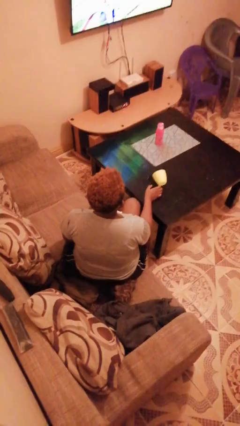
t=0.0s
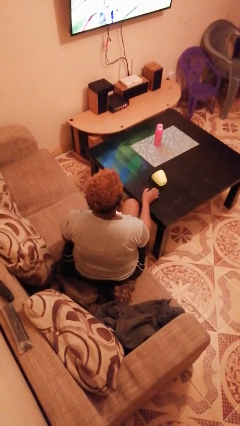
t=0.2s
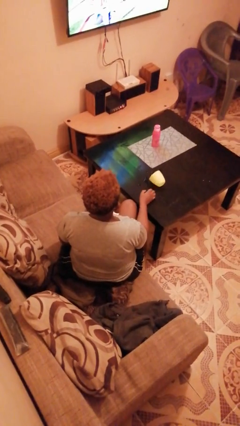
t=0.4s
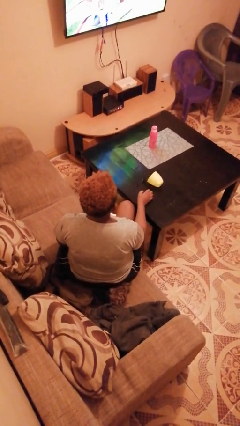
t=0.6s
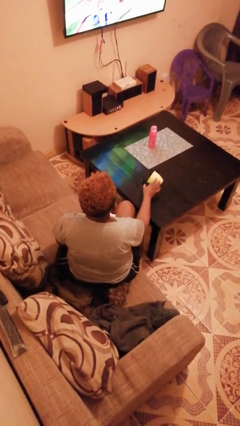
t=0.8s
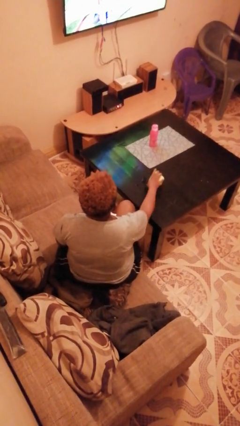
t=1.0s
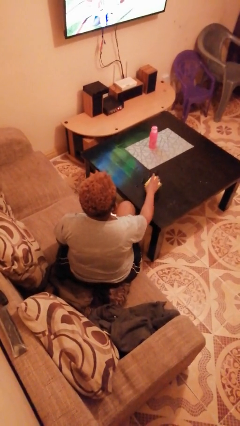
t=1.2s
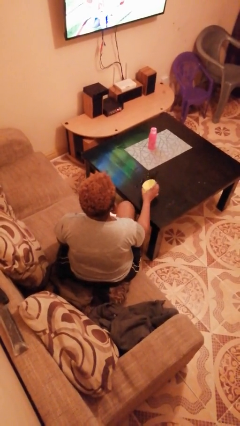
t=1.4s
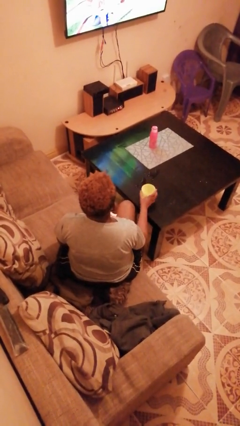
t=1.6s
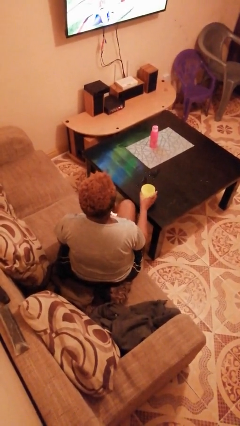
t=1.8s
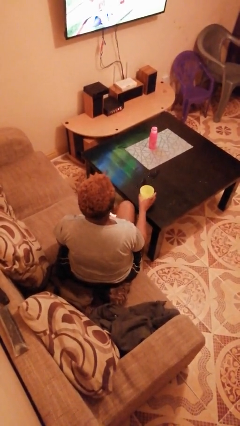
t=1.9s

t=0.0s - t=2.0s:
person sets upright glass

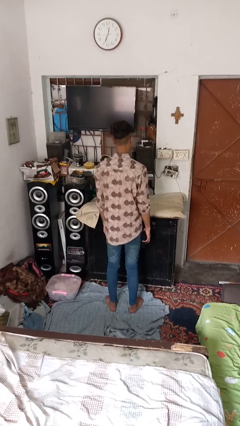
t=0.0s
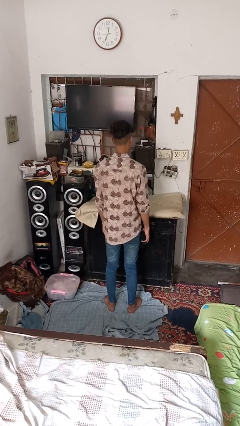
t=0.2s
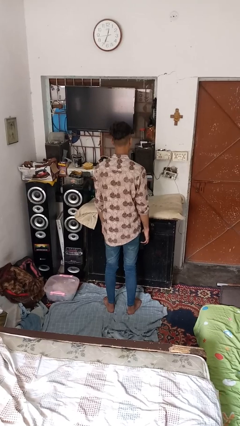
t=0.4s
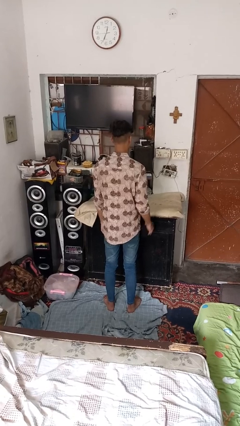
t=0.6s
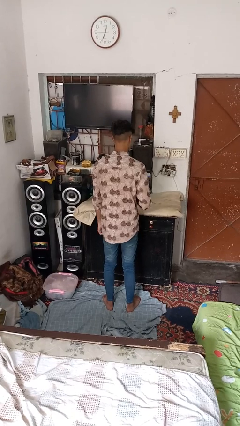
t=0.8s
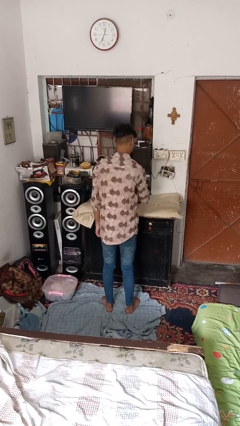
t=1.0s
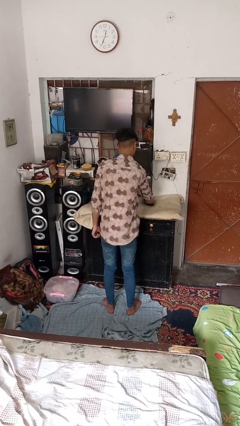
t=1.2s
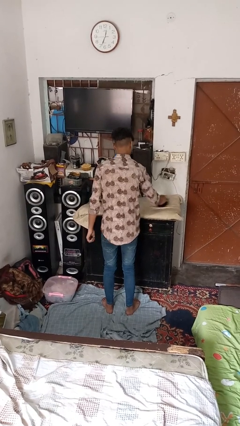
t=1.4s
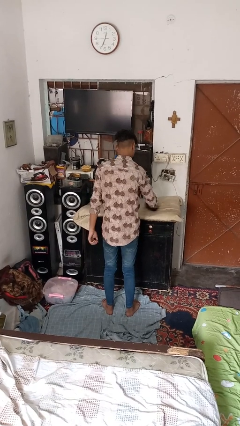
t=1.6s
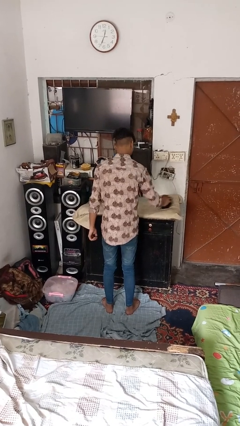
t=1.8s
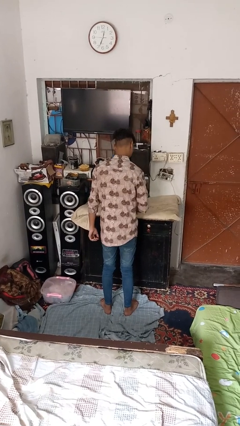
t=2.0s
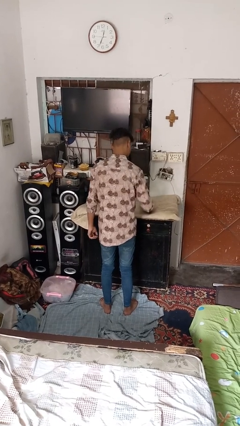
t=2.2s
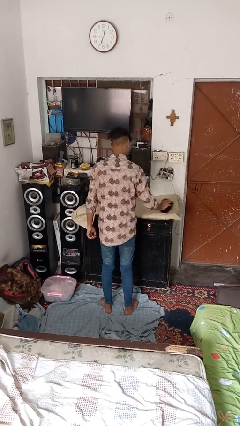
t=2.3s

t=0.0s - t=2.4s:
person cleans table with rag

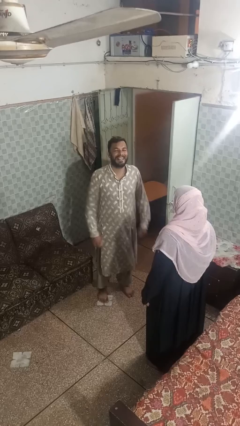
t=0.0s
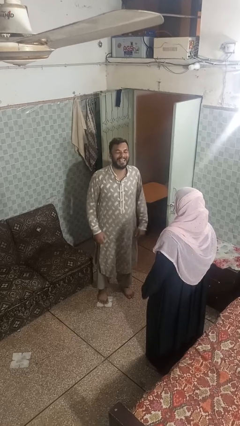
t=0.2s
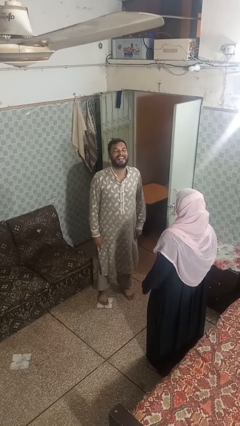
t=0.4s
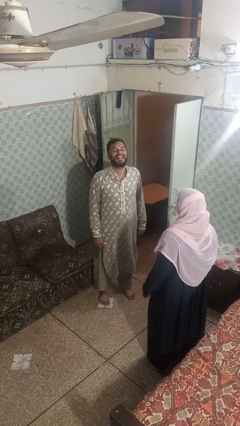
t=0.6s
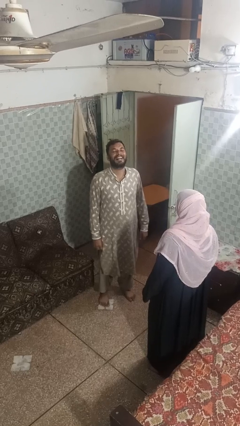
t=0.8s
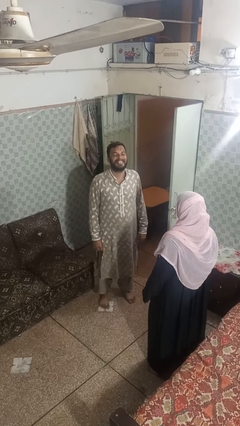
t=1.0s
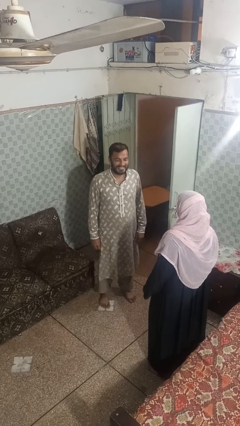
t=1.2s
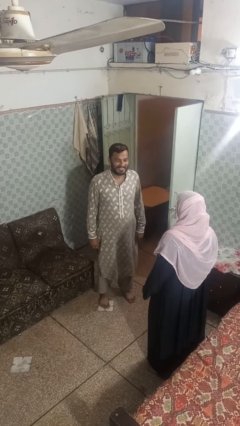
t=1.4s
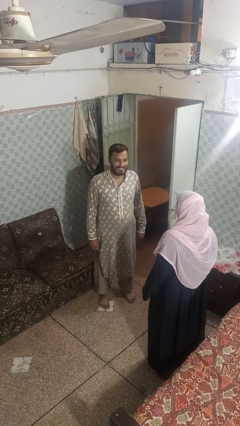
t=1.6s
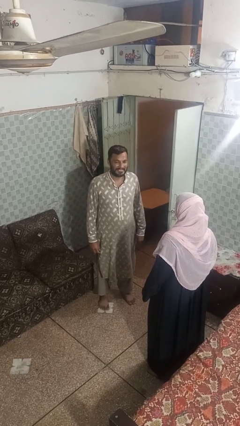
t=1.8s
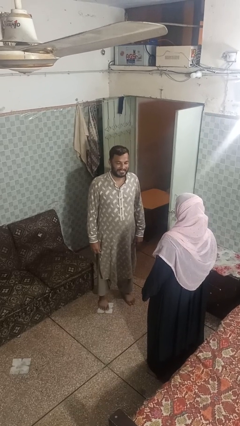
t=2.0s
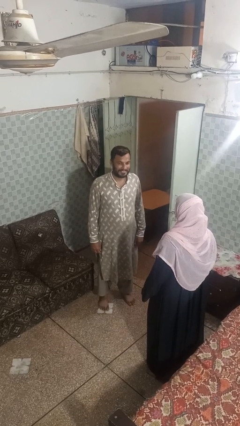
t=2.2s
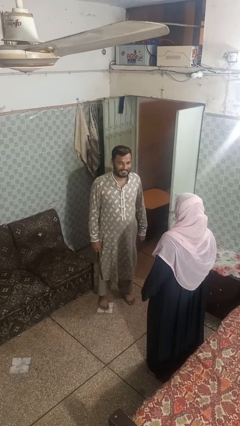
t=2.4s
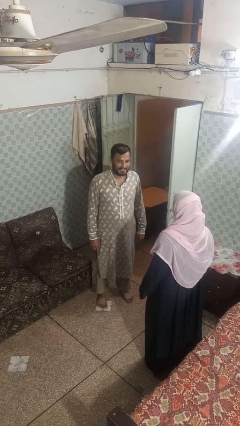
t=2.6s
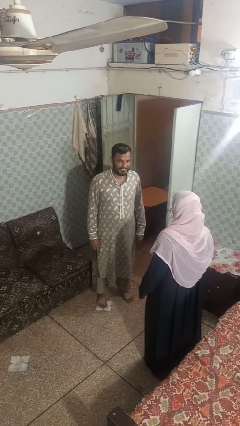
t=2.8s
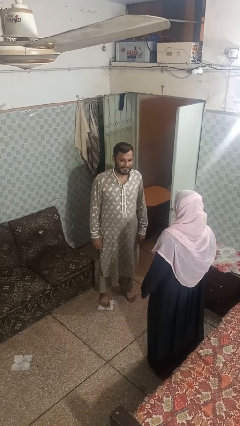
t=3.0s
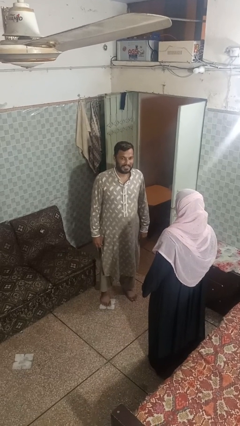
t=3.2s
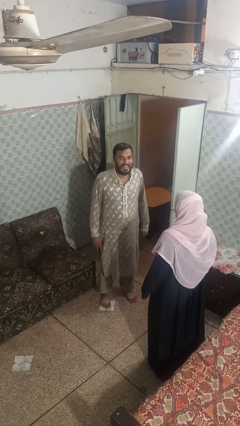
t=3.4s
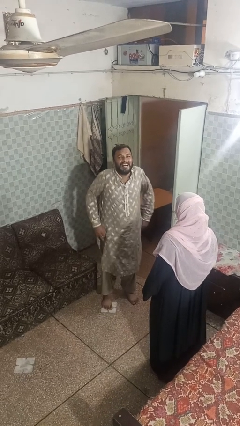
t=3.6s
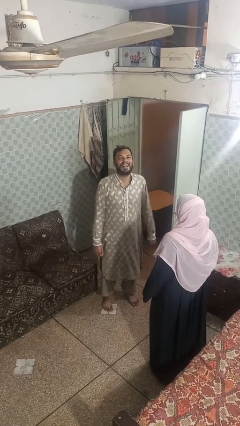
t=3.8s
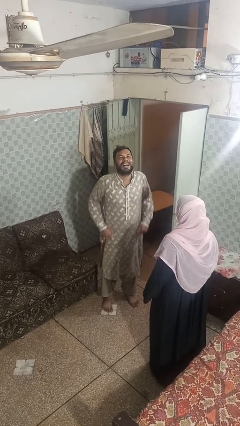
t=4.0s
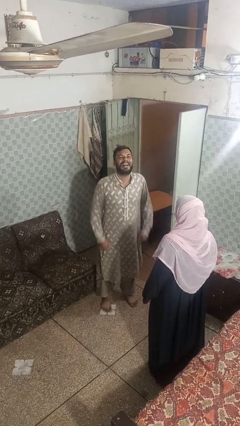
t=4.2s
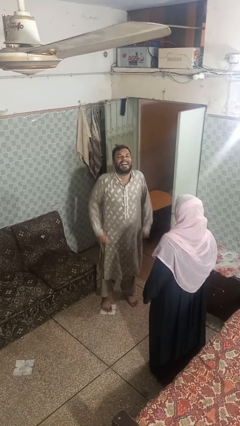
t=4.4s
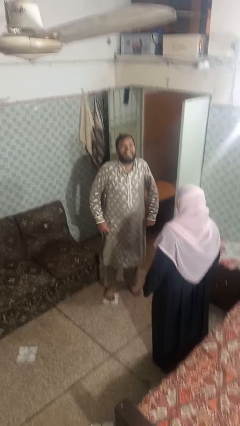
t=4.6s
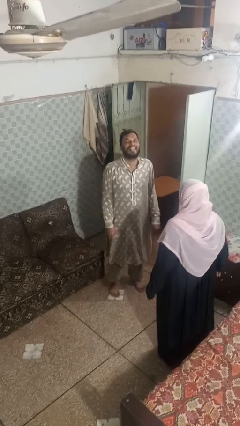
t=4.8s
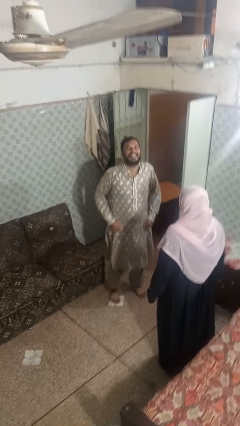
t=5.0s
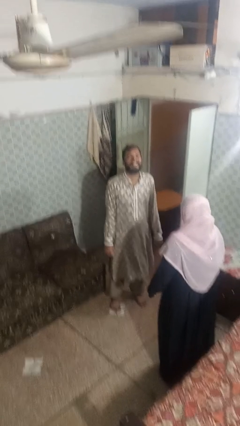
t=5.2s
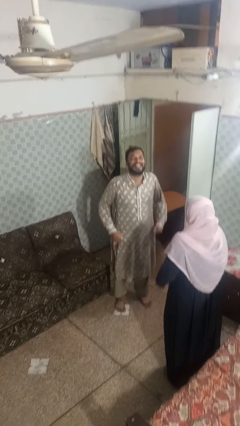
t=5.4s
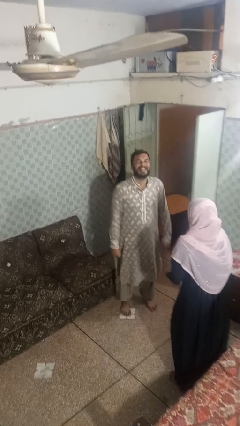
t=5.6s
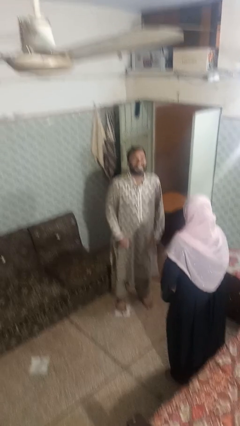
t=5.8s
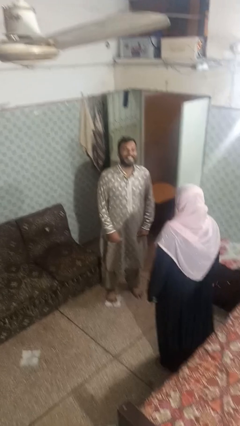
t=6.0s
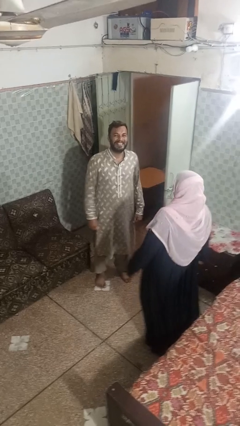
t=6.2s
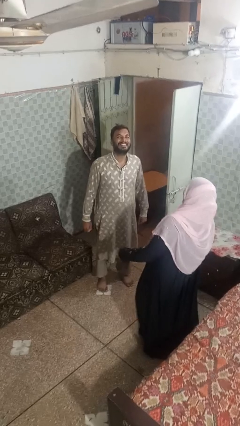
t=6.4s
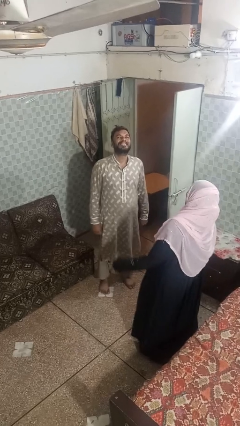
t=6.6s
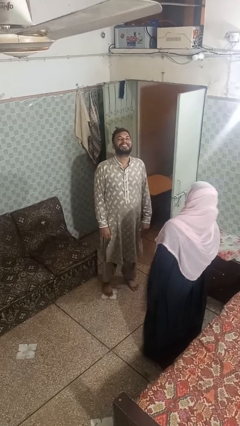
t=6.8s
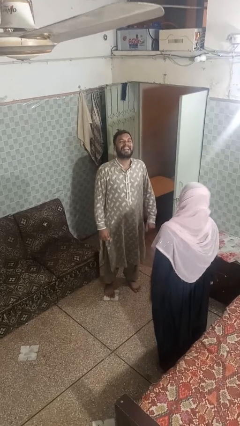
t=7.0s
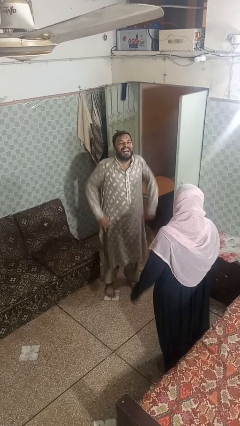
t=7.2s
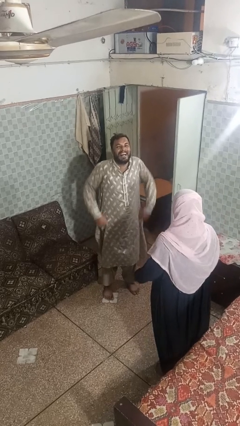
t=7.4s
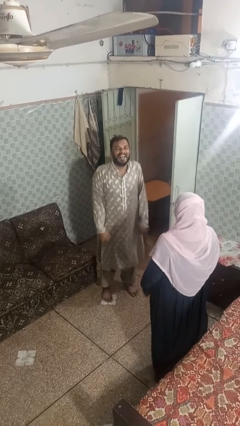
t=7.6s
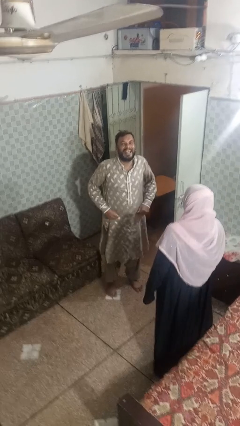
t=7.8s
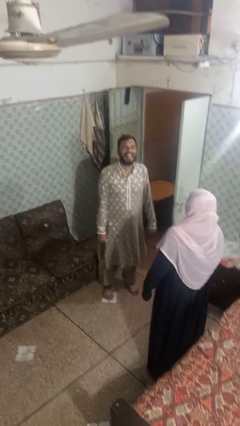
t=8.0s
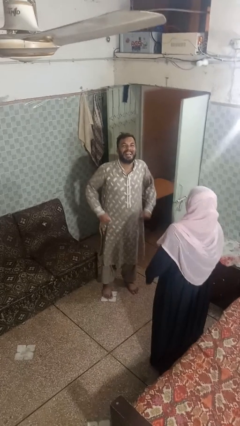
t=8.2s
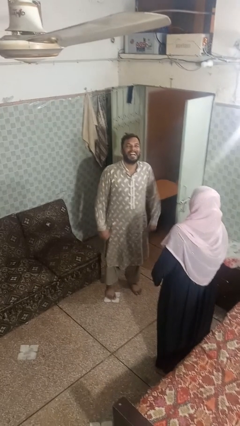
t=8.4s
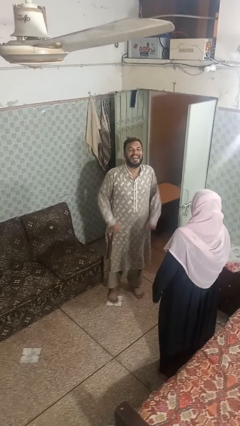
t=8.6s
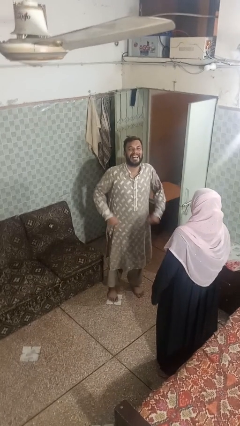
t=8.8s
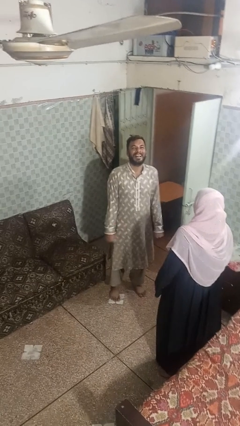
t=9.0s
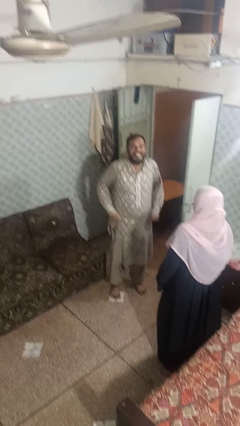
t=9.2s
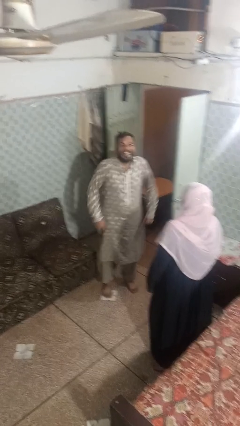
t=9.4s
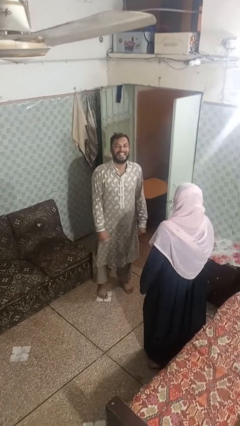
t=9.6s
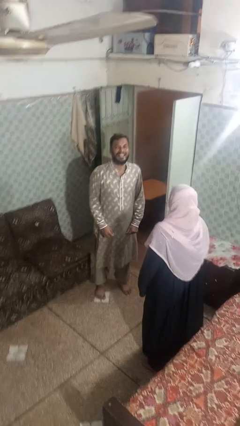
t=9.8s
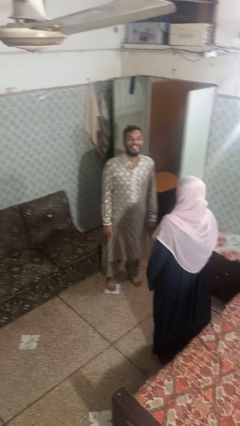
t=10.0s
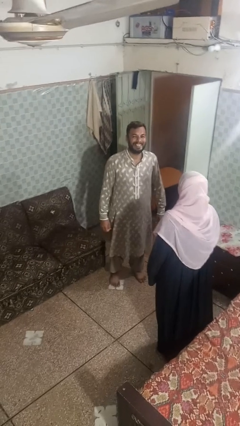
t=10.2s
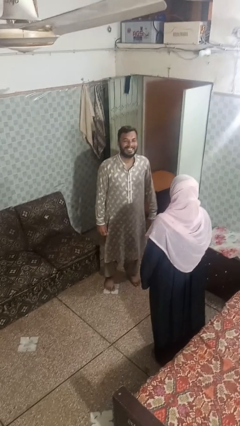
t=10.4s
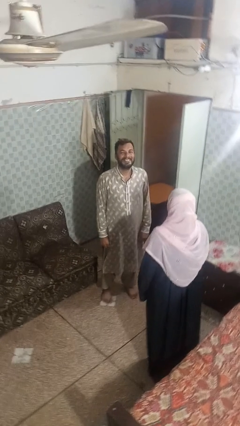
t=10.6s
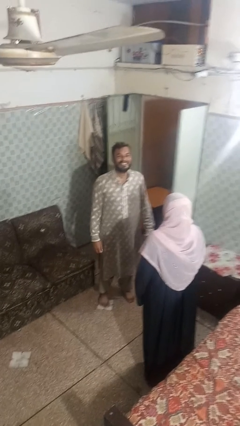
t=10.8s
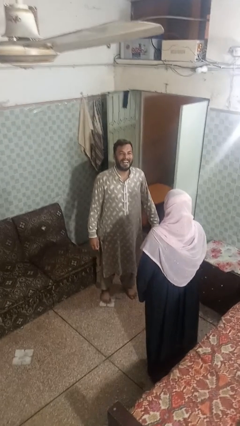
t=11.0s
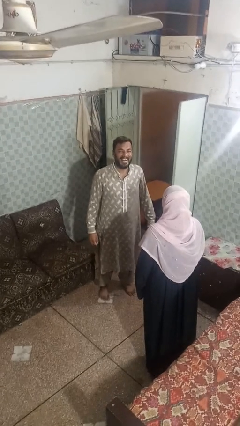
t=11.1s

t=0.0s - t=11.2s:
person laughs with person

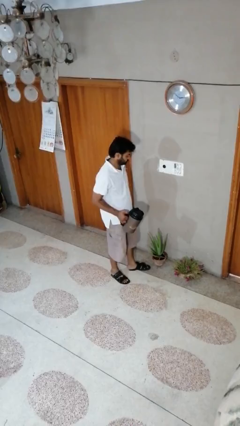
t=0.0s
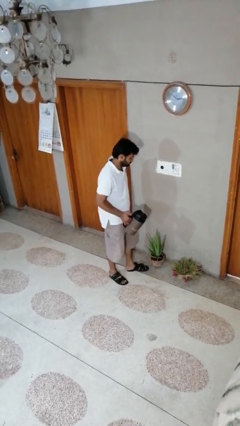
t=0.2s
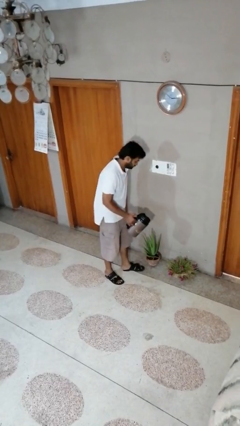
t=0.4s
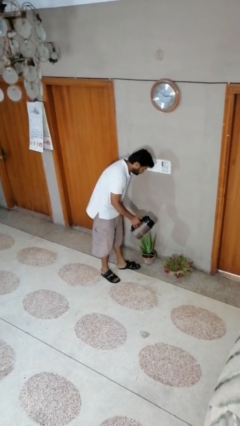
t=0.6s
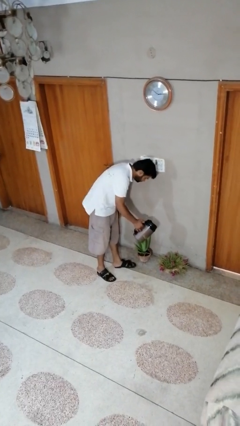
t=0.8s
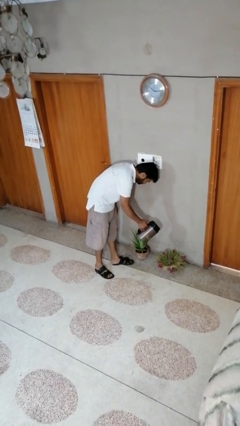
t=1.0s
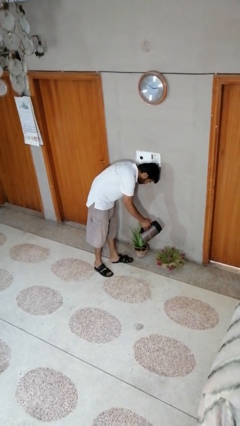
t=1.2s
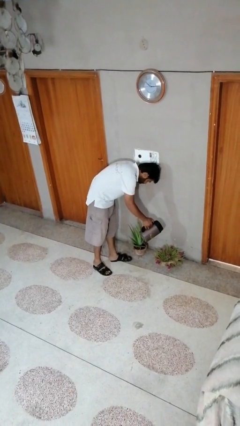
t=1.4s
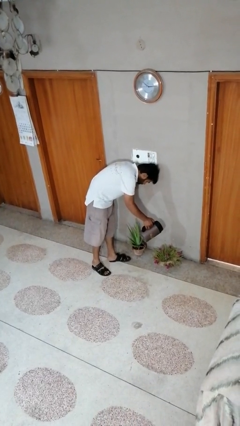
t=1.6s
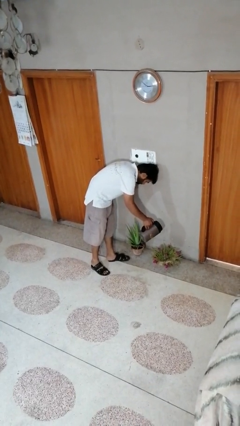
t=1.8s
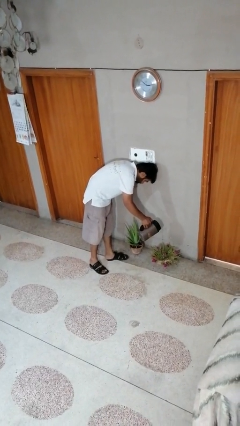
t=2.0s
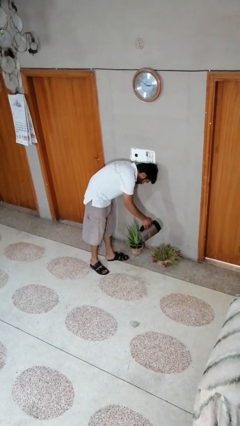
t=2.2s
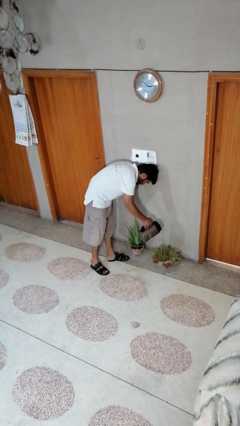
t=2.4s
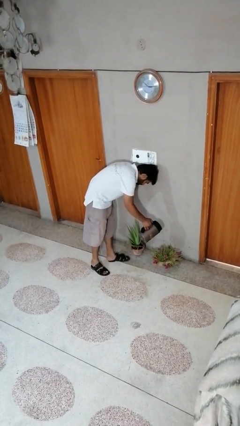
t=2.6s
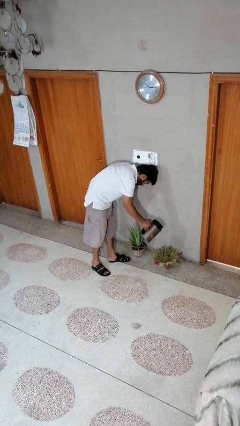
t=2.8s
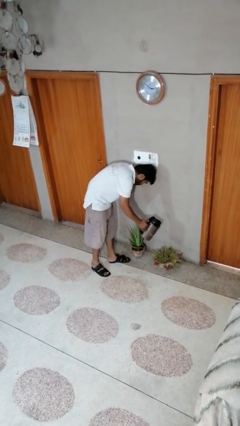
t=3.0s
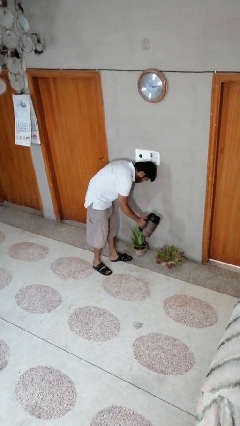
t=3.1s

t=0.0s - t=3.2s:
person waters houseplant
